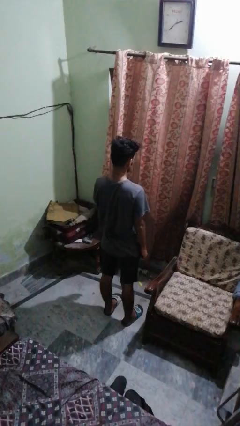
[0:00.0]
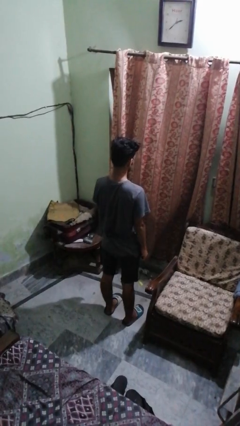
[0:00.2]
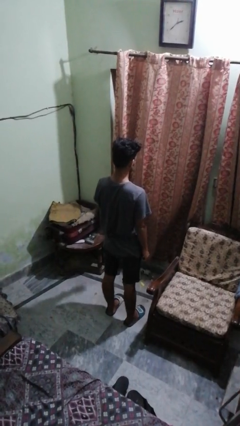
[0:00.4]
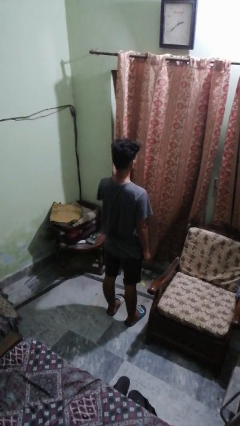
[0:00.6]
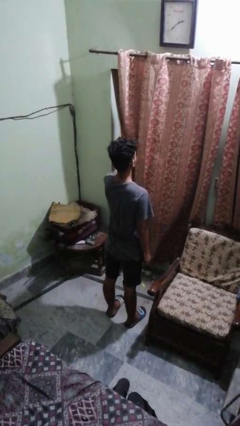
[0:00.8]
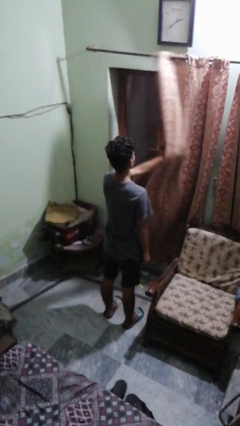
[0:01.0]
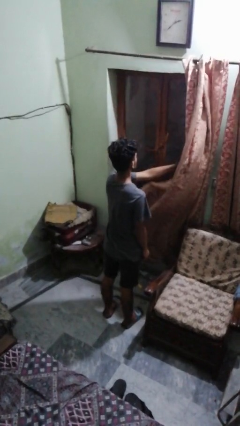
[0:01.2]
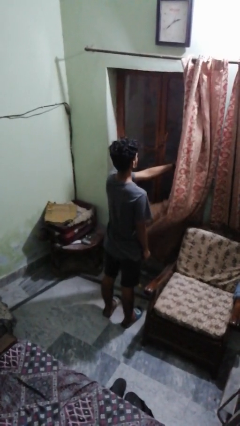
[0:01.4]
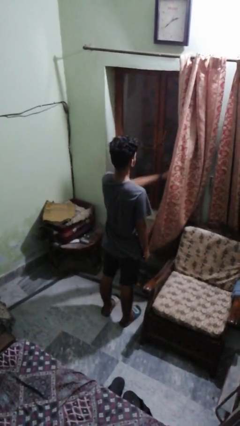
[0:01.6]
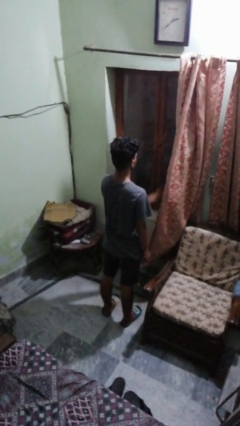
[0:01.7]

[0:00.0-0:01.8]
person opens curtains

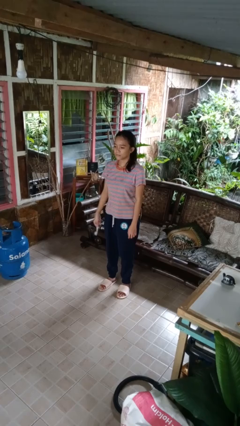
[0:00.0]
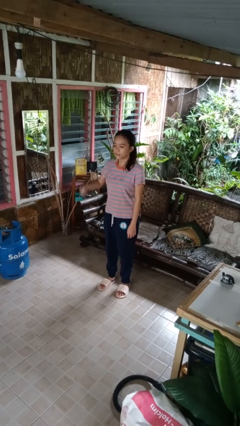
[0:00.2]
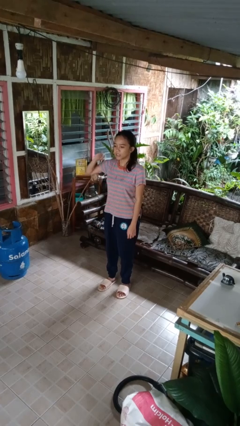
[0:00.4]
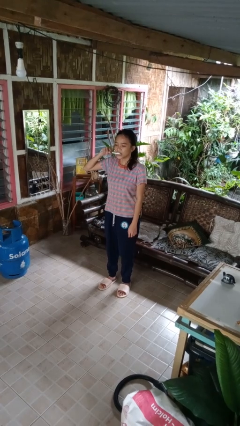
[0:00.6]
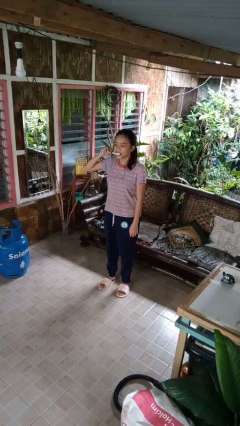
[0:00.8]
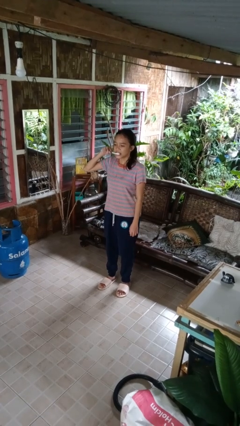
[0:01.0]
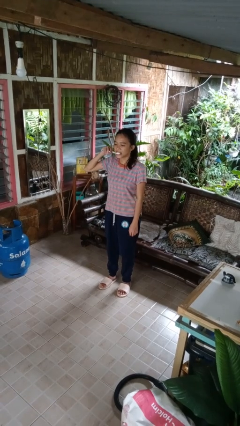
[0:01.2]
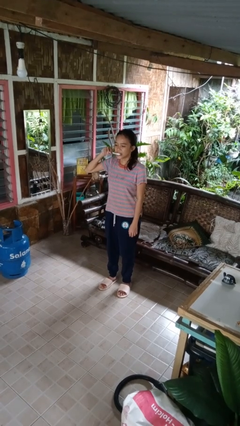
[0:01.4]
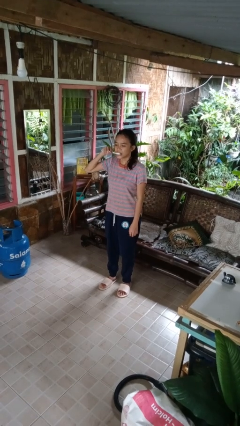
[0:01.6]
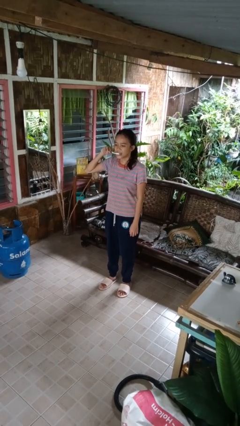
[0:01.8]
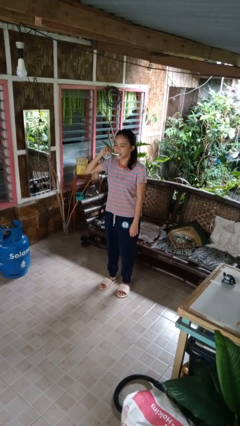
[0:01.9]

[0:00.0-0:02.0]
person brushes teeth

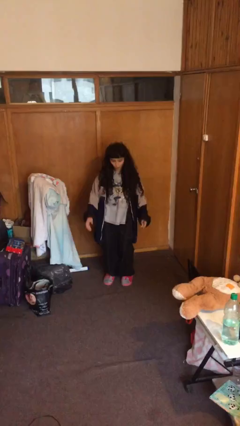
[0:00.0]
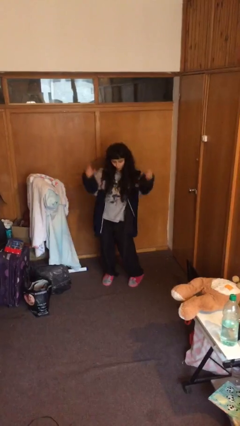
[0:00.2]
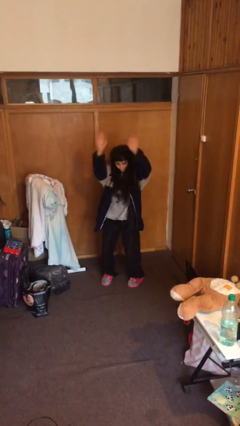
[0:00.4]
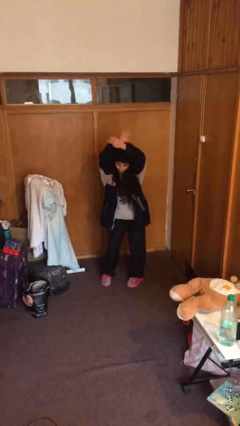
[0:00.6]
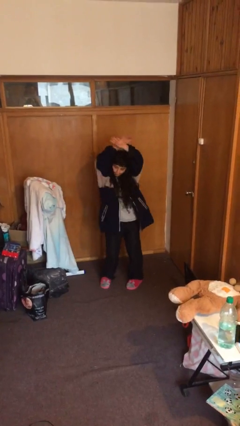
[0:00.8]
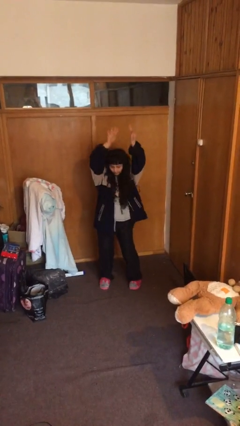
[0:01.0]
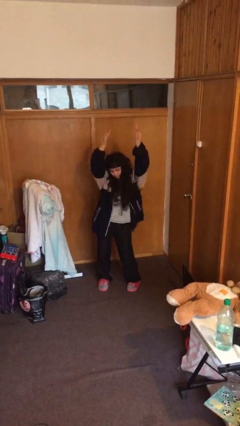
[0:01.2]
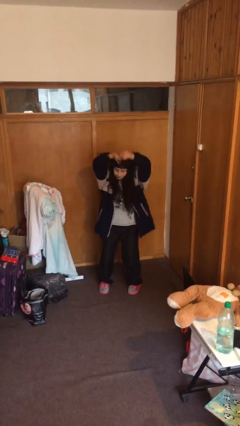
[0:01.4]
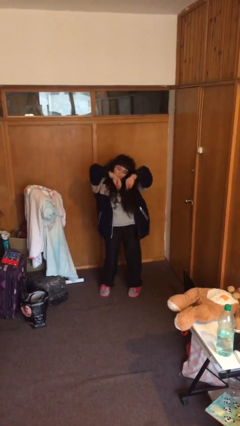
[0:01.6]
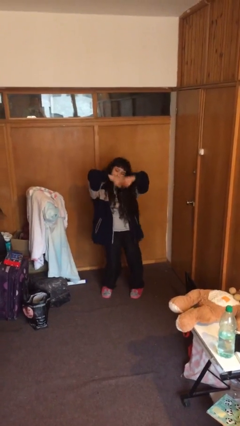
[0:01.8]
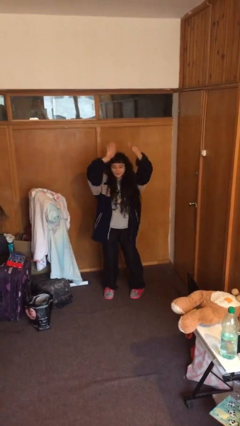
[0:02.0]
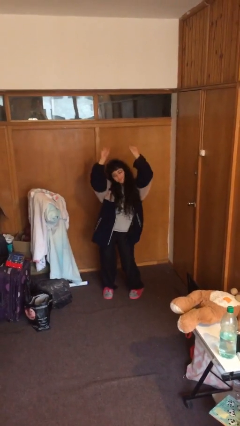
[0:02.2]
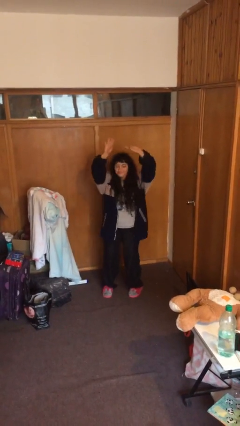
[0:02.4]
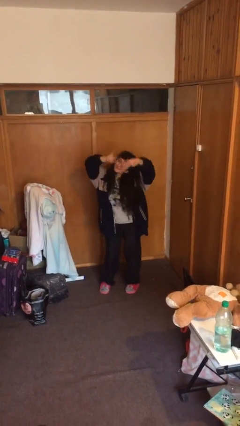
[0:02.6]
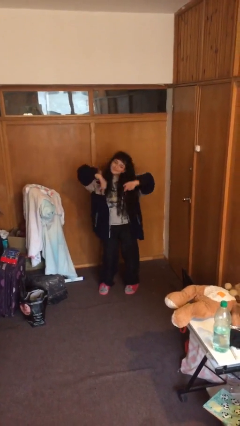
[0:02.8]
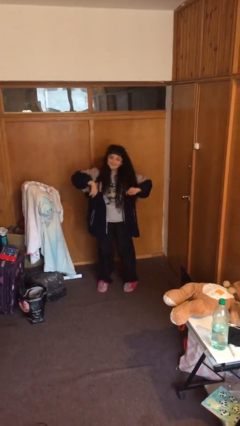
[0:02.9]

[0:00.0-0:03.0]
person dances in place

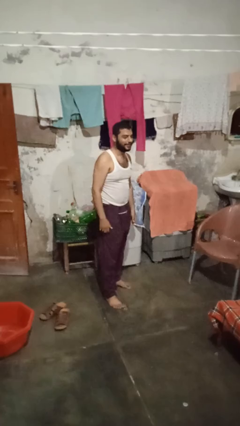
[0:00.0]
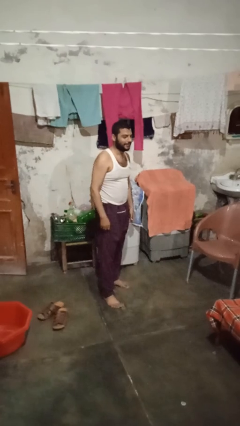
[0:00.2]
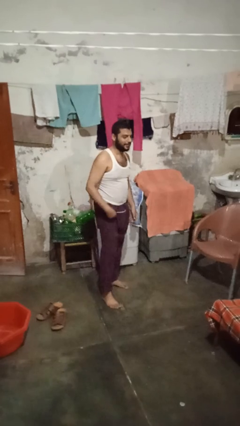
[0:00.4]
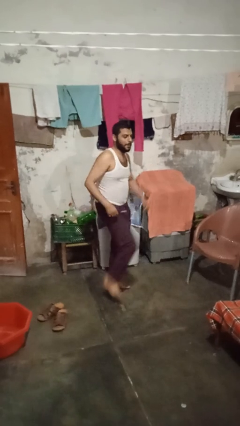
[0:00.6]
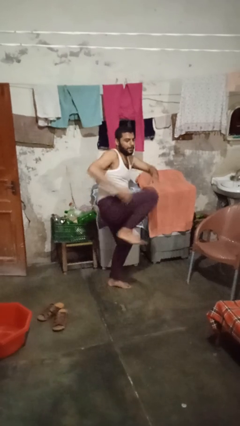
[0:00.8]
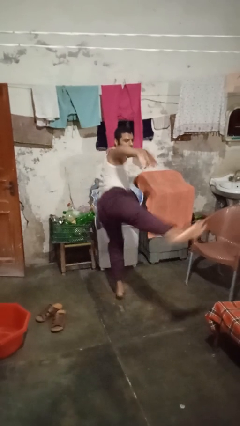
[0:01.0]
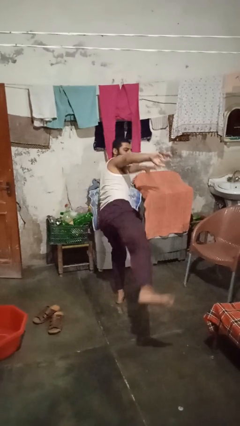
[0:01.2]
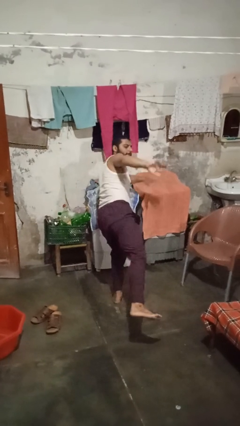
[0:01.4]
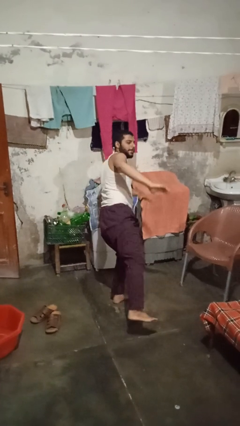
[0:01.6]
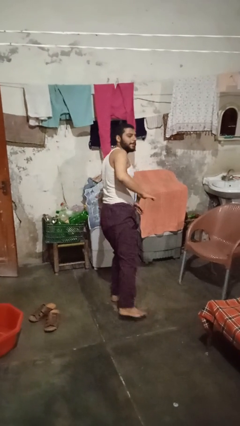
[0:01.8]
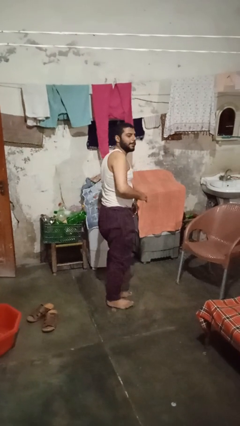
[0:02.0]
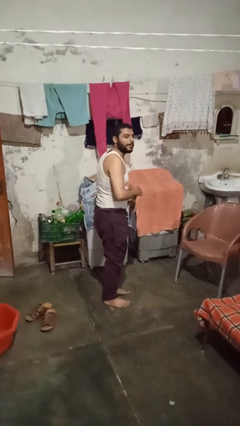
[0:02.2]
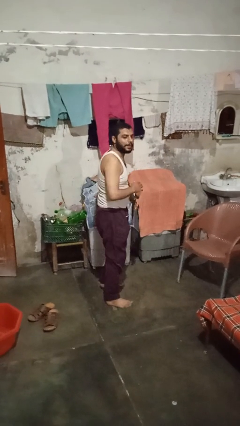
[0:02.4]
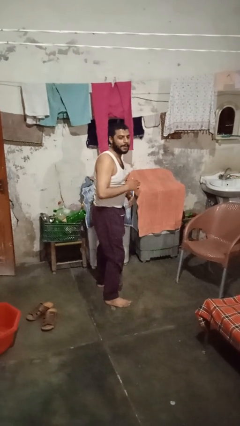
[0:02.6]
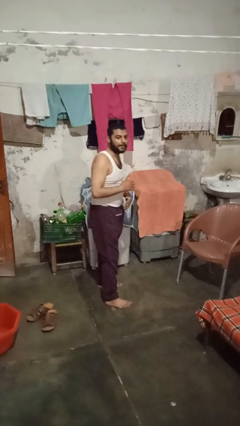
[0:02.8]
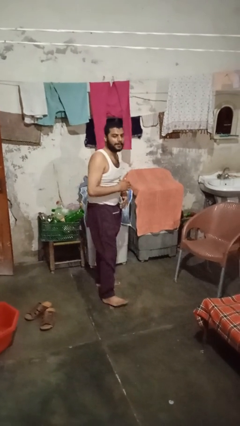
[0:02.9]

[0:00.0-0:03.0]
person karate kicks

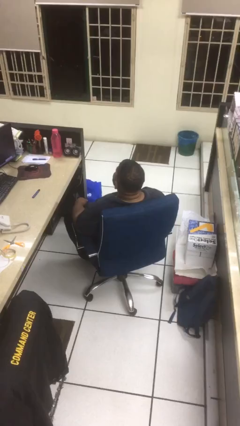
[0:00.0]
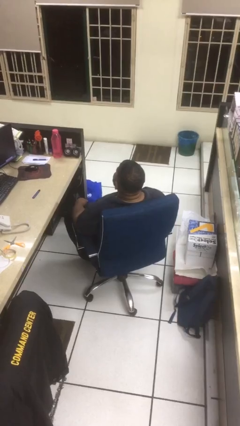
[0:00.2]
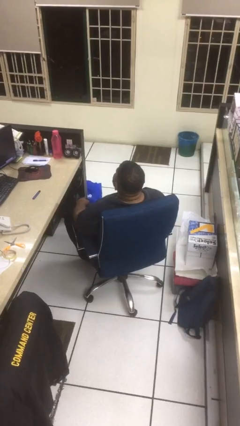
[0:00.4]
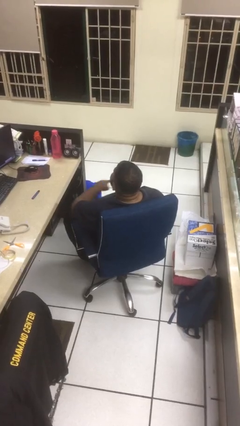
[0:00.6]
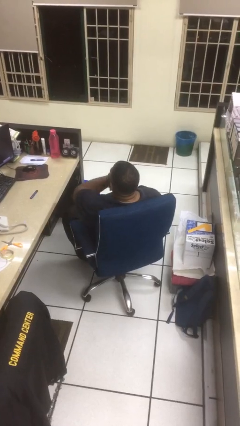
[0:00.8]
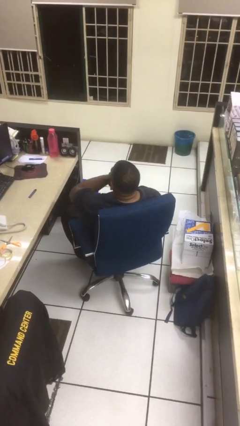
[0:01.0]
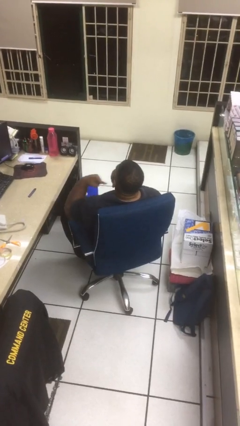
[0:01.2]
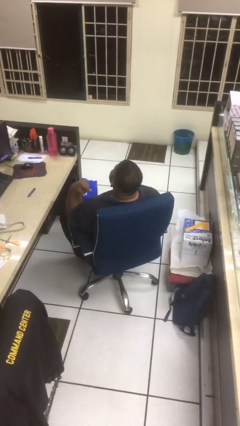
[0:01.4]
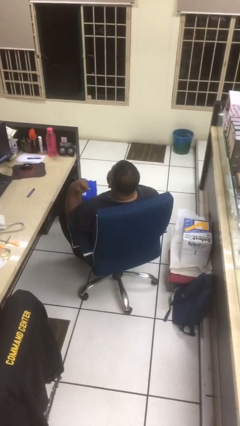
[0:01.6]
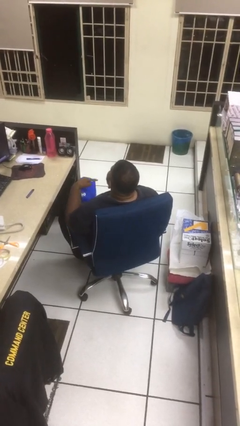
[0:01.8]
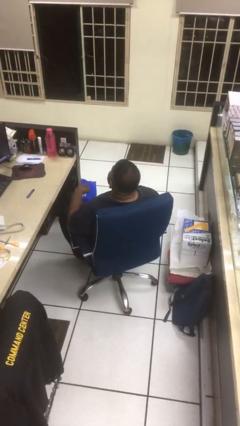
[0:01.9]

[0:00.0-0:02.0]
person gestures cut

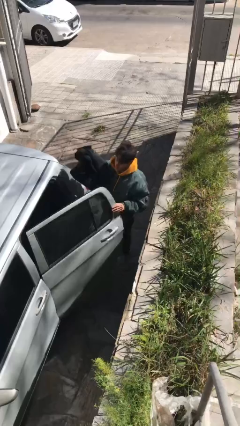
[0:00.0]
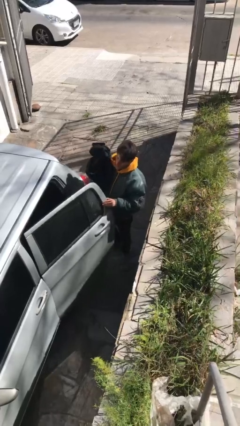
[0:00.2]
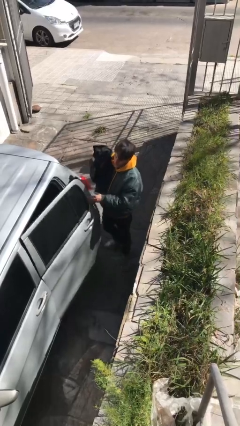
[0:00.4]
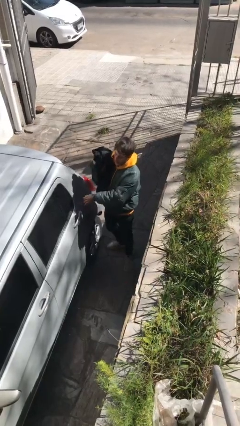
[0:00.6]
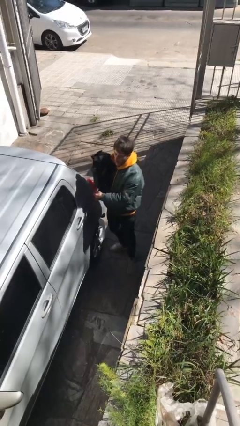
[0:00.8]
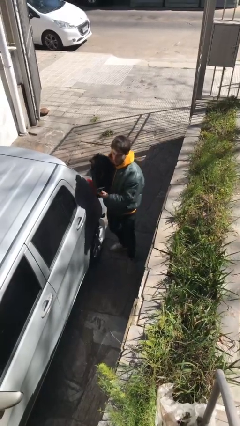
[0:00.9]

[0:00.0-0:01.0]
person closes car door

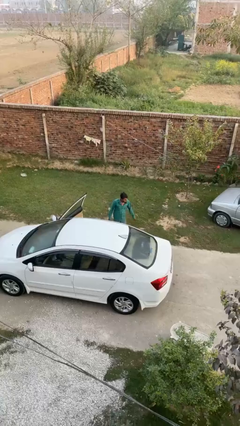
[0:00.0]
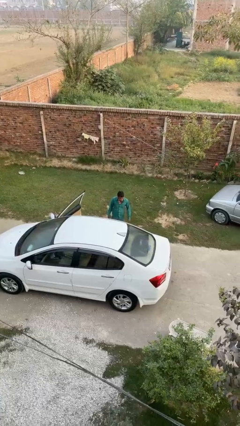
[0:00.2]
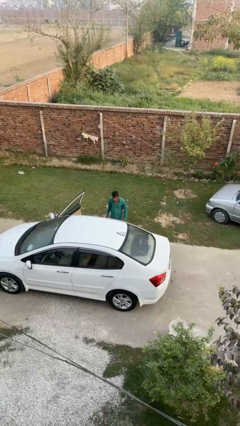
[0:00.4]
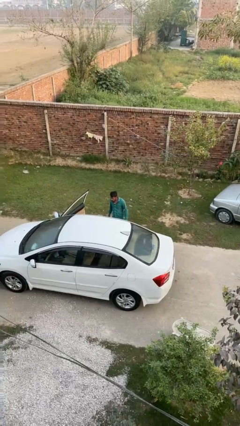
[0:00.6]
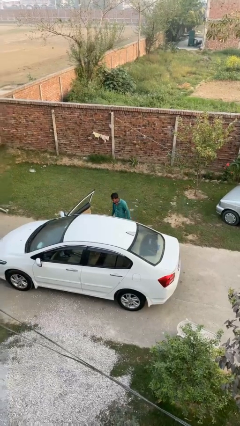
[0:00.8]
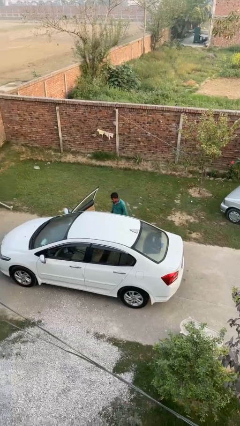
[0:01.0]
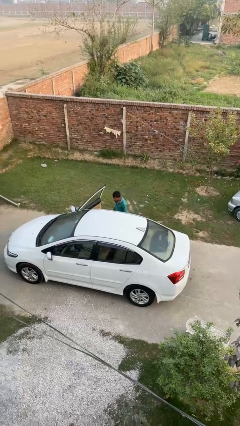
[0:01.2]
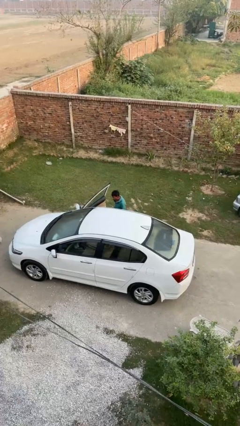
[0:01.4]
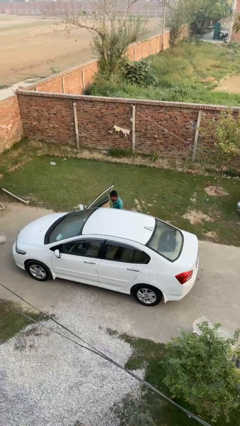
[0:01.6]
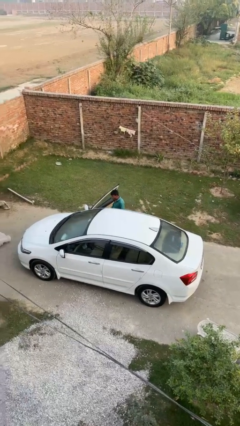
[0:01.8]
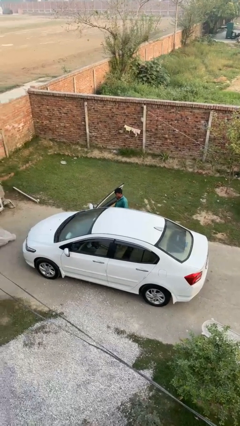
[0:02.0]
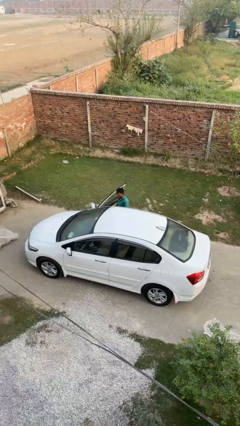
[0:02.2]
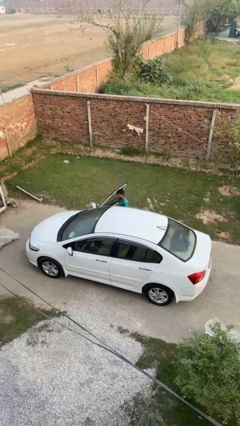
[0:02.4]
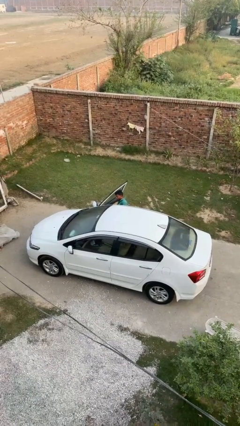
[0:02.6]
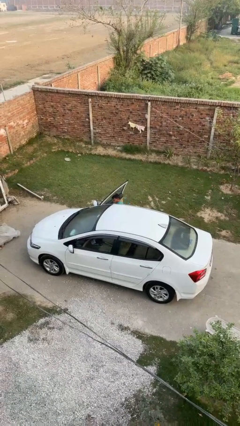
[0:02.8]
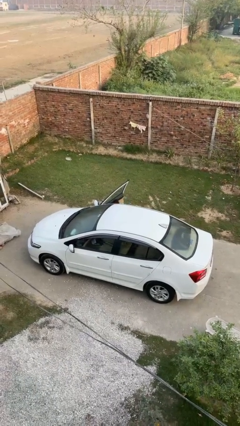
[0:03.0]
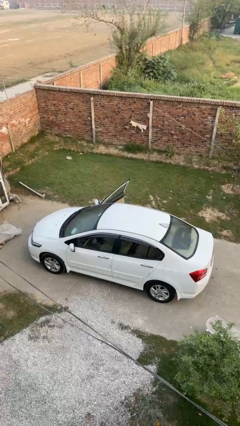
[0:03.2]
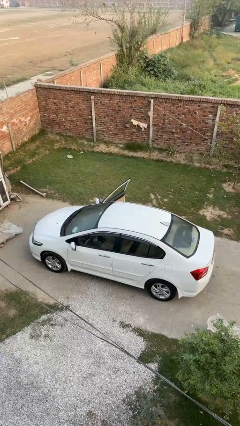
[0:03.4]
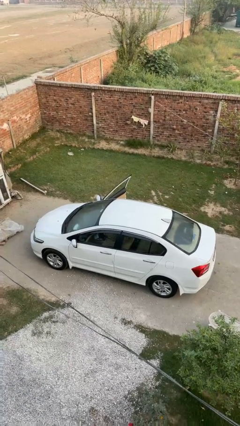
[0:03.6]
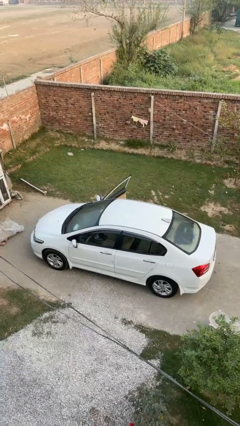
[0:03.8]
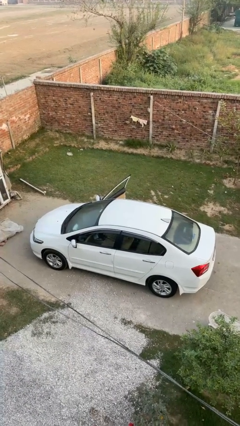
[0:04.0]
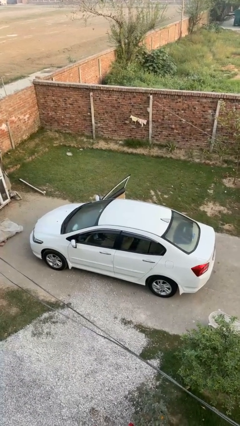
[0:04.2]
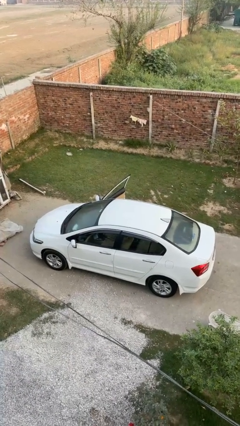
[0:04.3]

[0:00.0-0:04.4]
person enters car

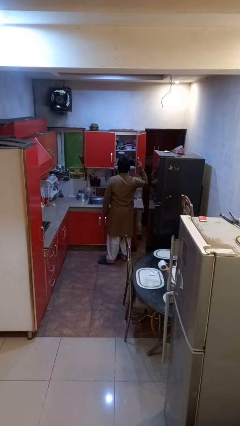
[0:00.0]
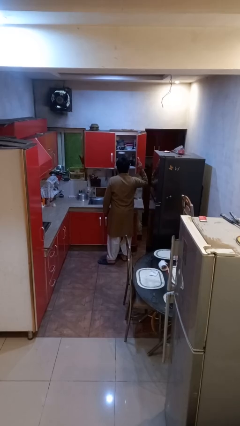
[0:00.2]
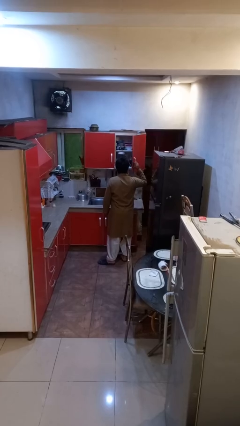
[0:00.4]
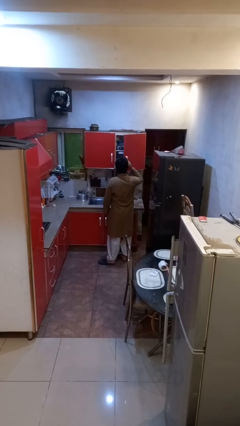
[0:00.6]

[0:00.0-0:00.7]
person closes cabinet
